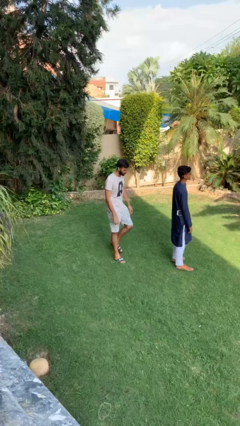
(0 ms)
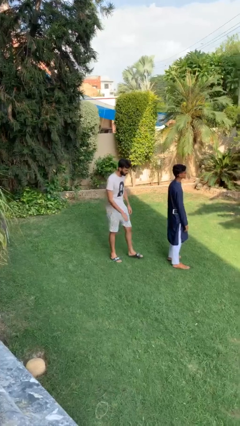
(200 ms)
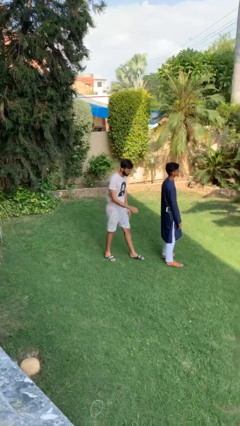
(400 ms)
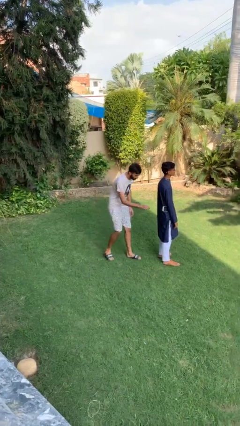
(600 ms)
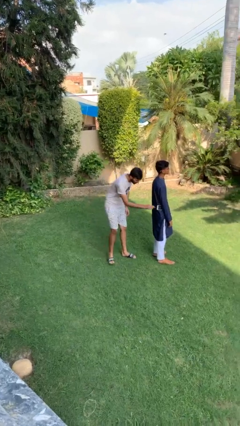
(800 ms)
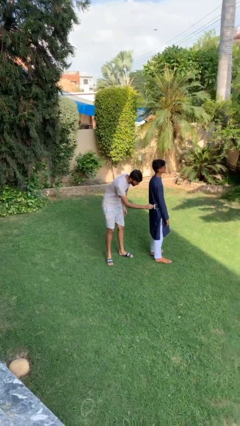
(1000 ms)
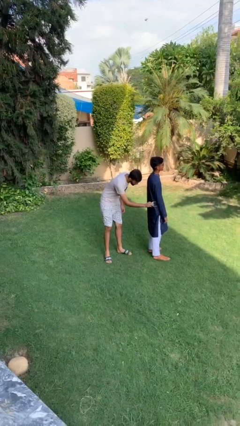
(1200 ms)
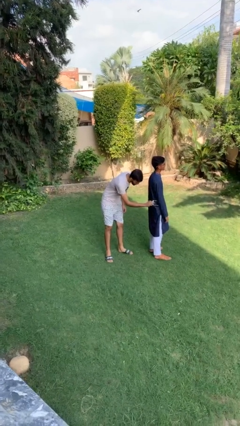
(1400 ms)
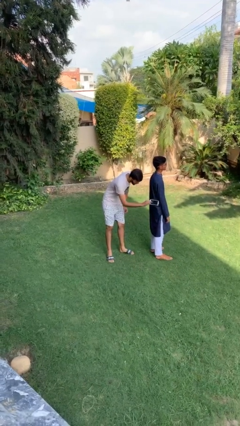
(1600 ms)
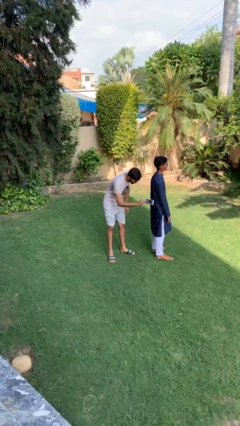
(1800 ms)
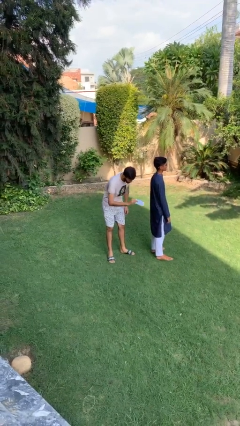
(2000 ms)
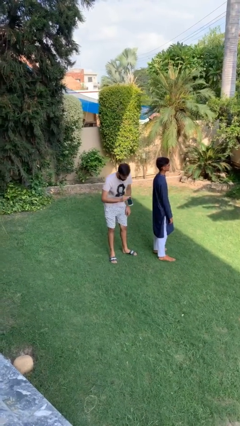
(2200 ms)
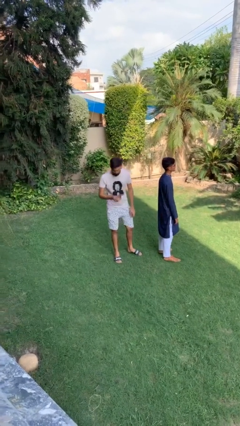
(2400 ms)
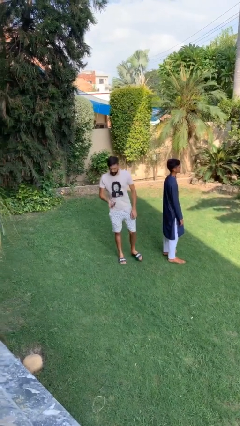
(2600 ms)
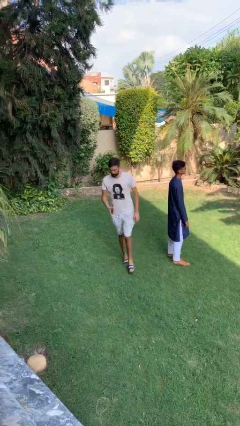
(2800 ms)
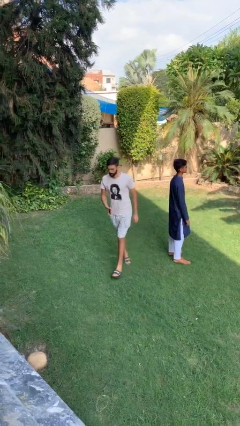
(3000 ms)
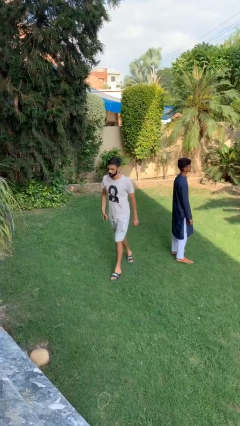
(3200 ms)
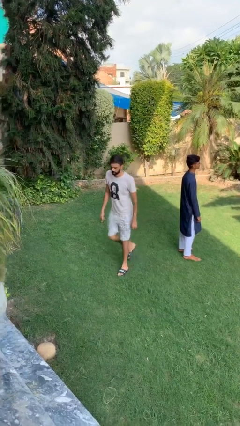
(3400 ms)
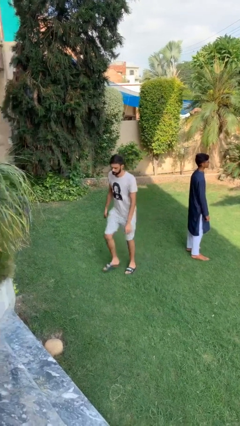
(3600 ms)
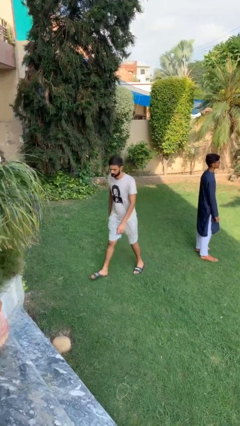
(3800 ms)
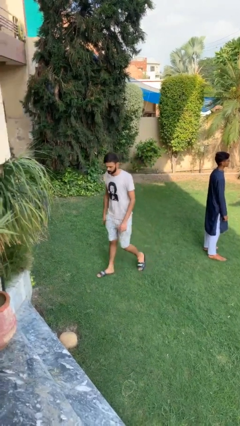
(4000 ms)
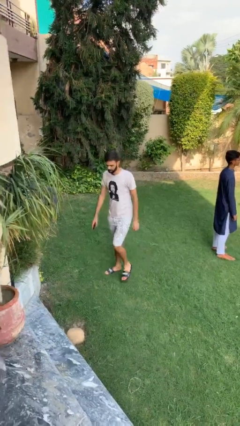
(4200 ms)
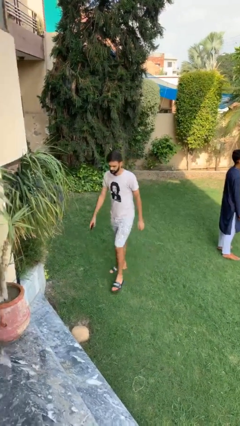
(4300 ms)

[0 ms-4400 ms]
person steals object from person

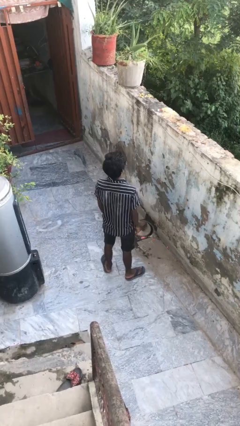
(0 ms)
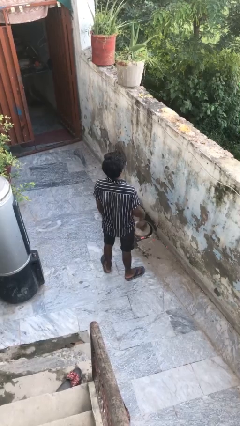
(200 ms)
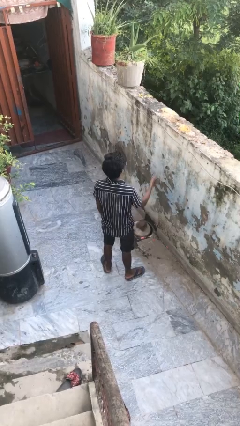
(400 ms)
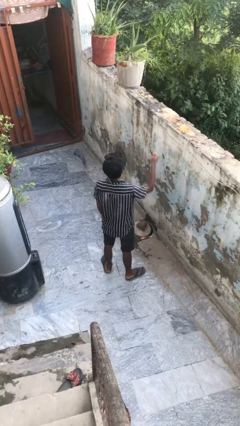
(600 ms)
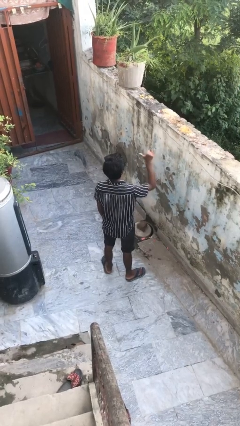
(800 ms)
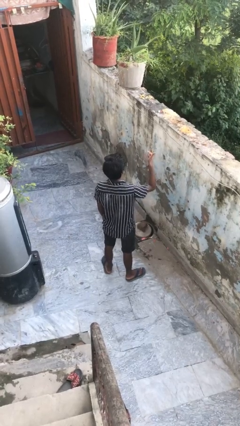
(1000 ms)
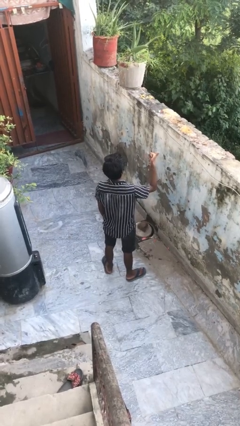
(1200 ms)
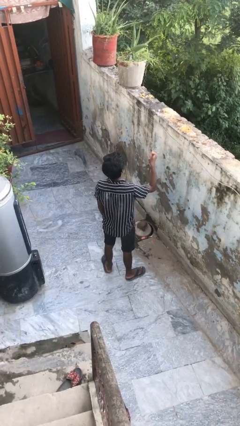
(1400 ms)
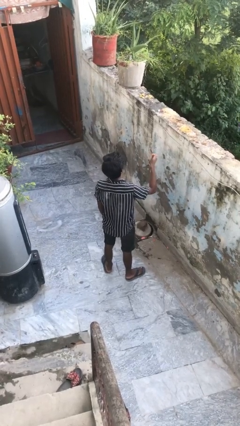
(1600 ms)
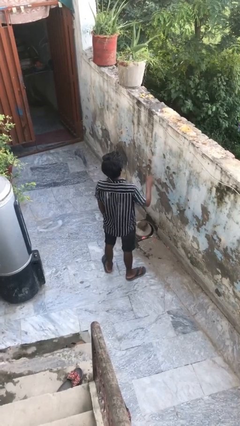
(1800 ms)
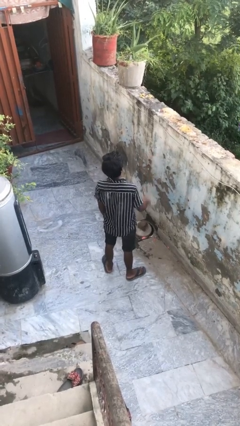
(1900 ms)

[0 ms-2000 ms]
person gestures hang loose

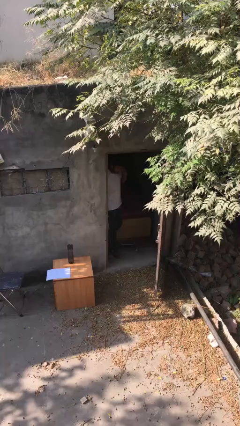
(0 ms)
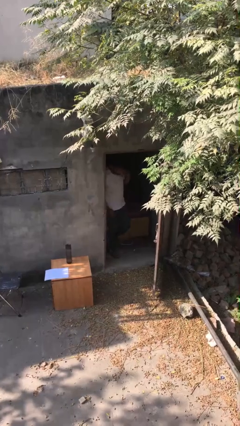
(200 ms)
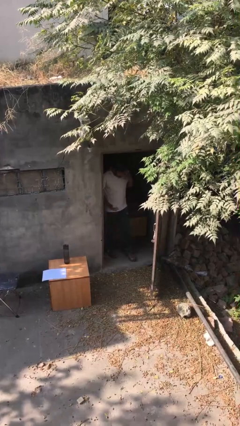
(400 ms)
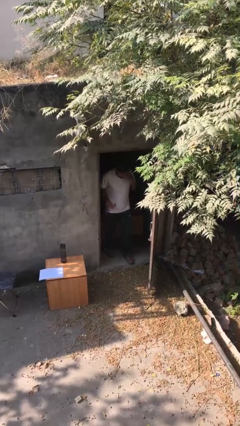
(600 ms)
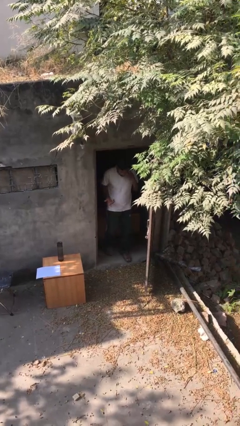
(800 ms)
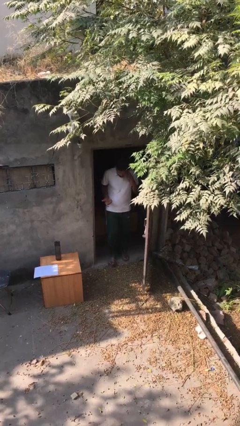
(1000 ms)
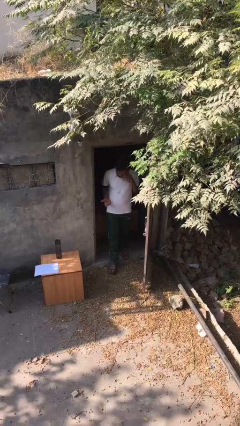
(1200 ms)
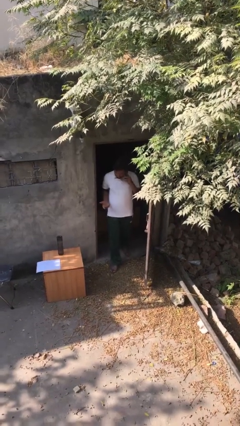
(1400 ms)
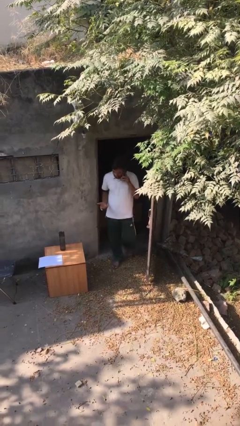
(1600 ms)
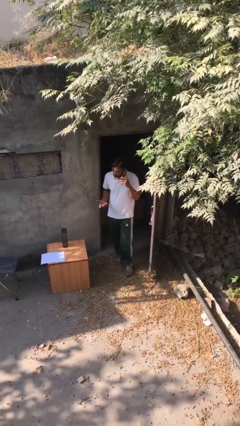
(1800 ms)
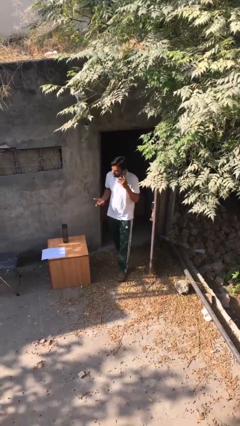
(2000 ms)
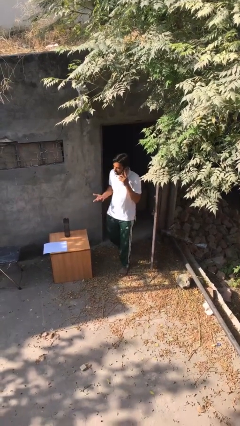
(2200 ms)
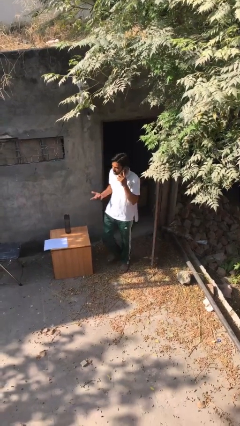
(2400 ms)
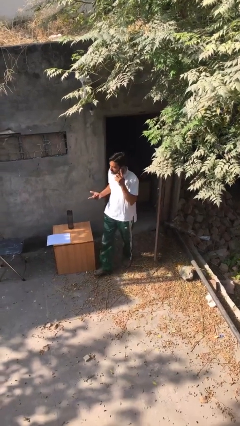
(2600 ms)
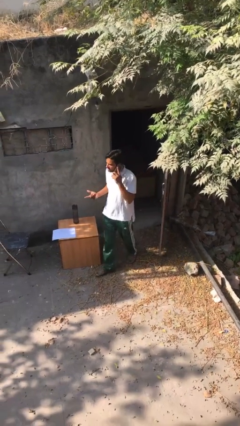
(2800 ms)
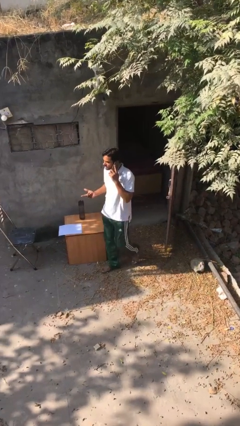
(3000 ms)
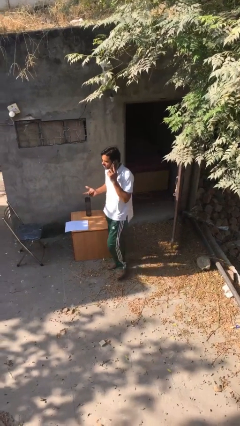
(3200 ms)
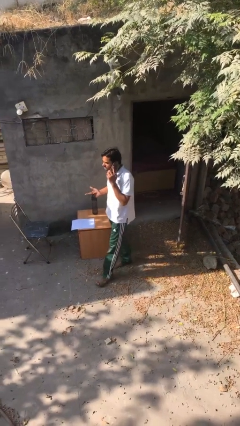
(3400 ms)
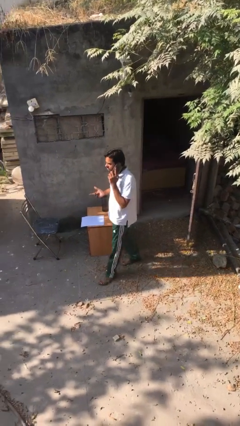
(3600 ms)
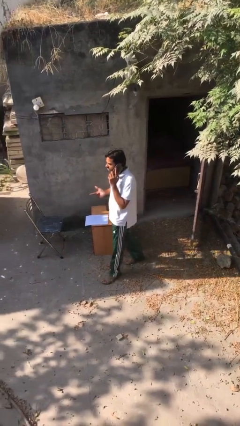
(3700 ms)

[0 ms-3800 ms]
person enters scene through structure

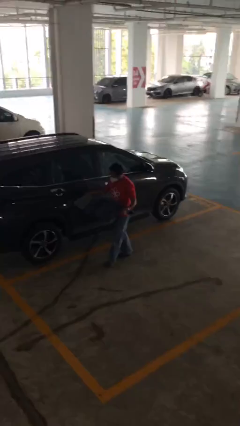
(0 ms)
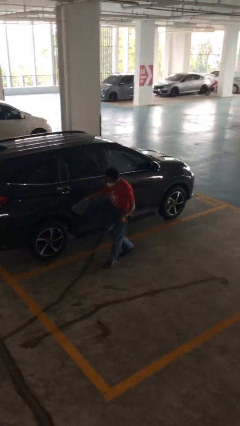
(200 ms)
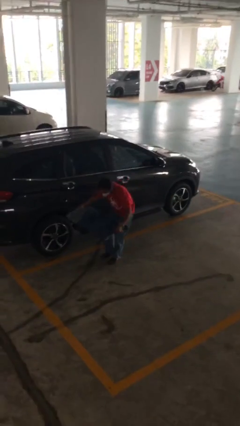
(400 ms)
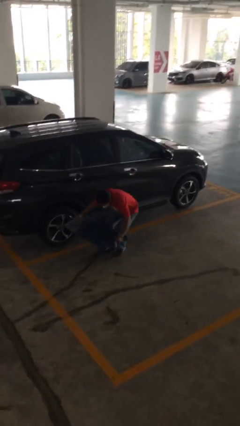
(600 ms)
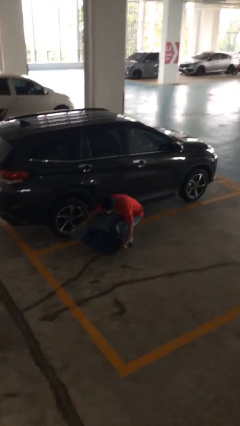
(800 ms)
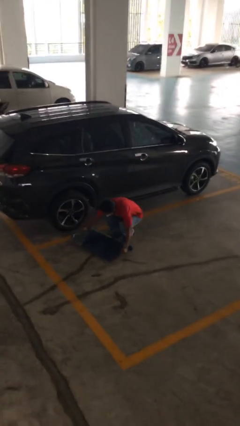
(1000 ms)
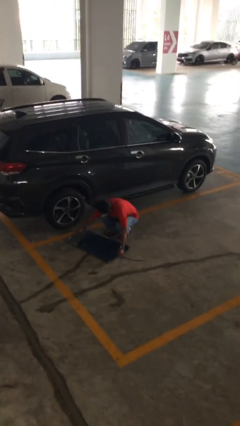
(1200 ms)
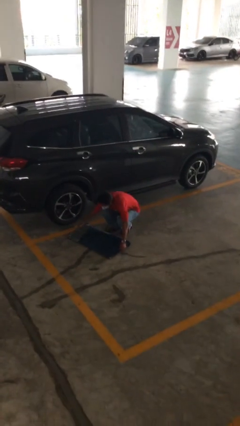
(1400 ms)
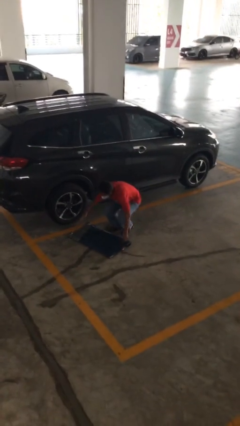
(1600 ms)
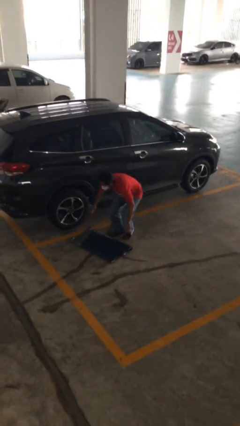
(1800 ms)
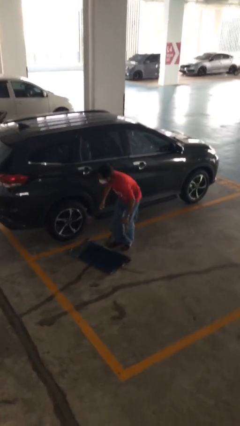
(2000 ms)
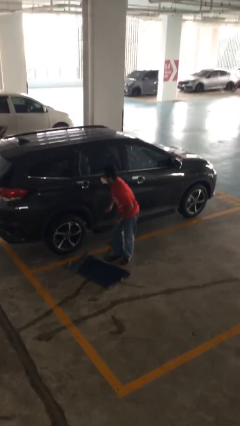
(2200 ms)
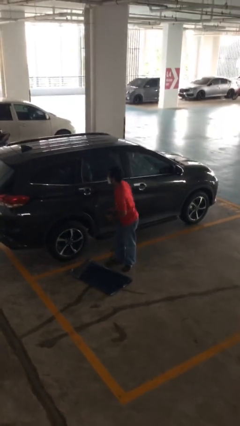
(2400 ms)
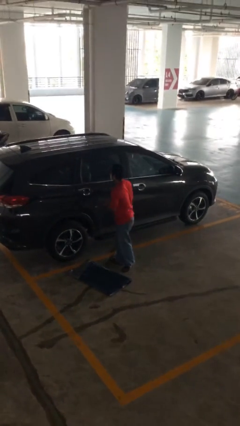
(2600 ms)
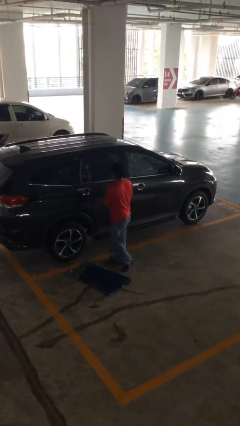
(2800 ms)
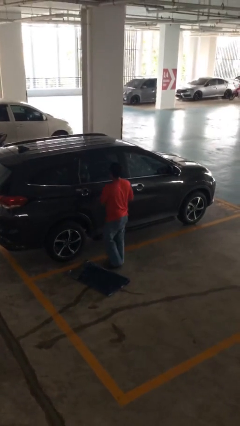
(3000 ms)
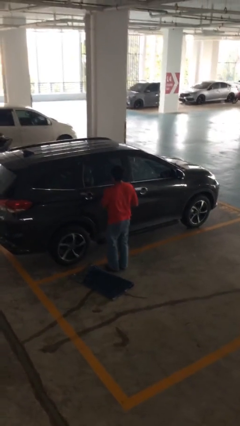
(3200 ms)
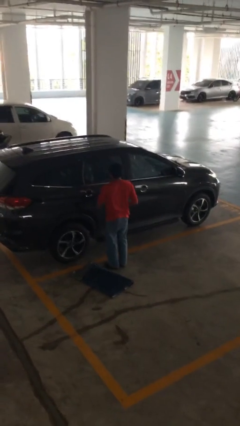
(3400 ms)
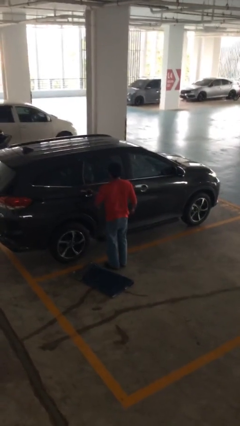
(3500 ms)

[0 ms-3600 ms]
person puts down object on floor

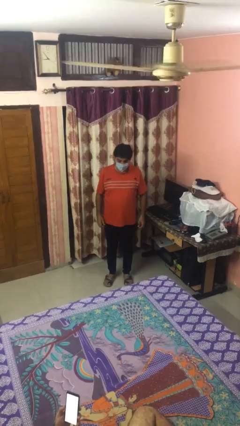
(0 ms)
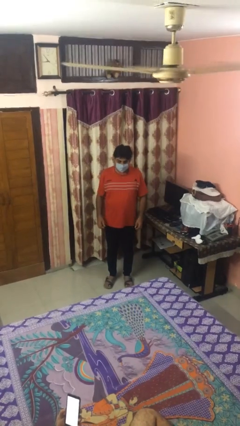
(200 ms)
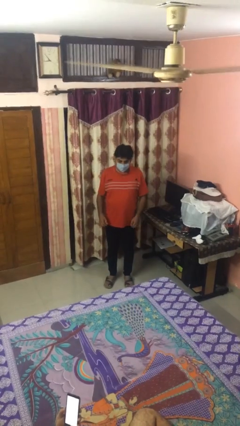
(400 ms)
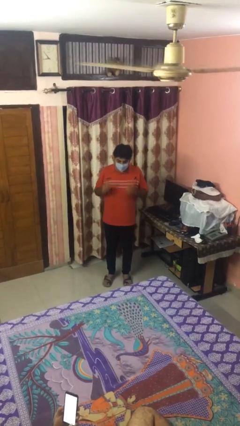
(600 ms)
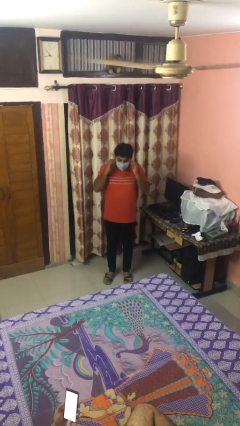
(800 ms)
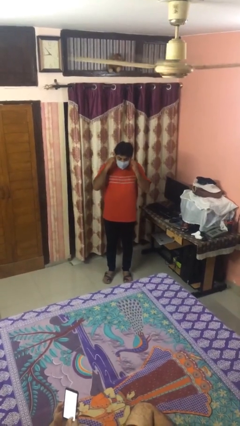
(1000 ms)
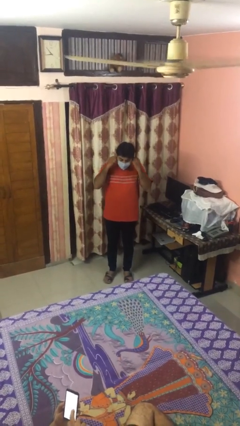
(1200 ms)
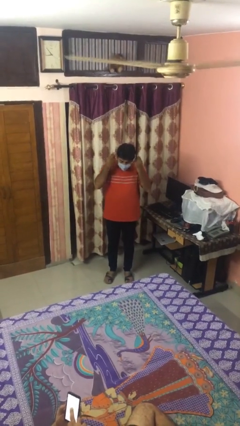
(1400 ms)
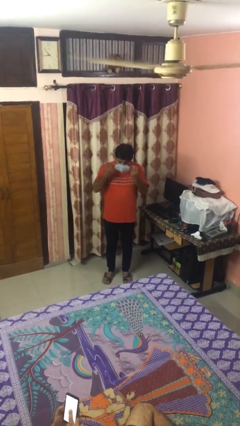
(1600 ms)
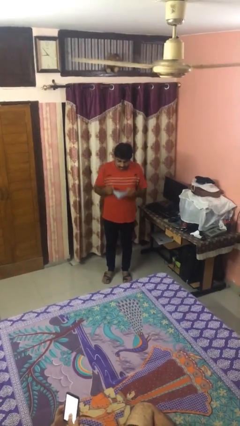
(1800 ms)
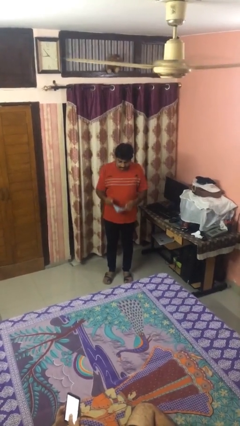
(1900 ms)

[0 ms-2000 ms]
person takes off facemask

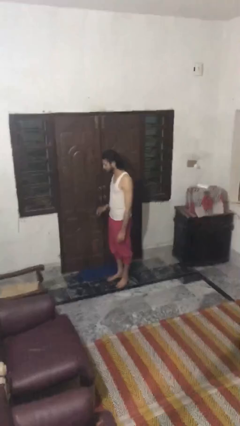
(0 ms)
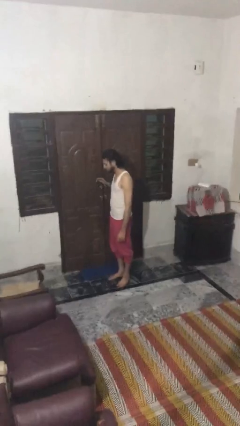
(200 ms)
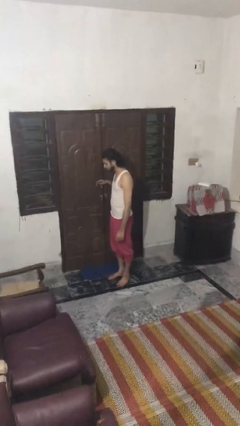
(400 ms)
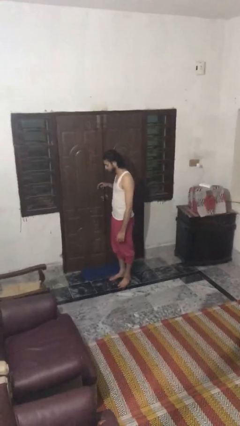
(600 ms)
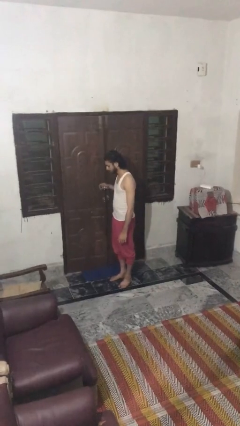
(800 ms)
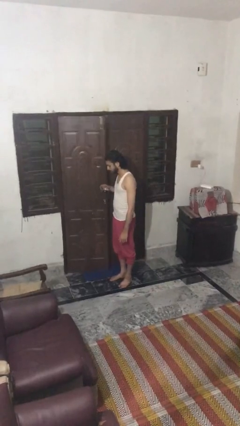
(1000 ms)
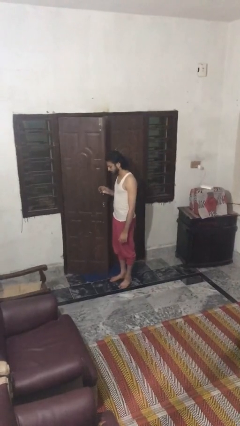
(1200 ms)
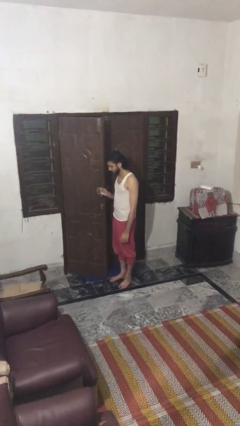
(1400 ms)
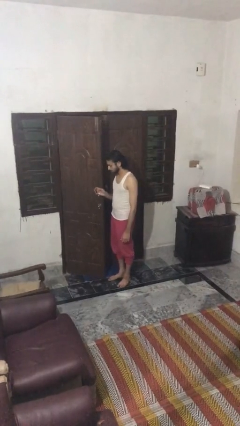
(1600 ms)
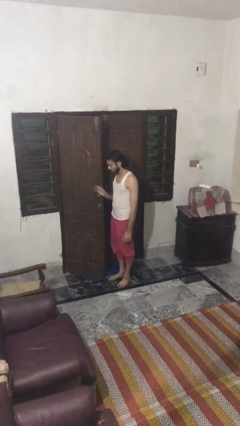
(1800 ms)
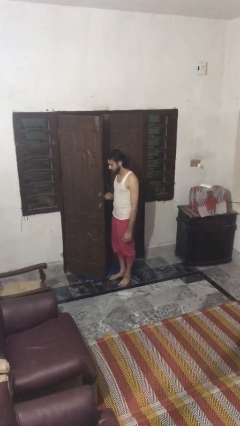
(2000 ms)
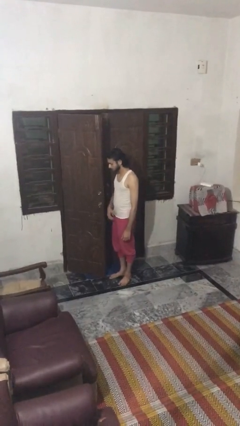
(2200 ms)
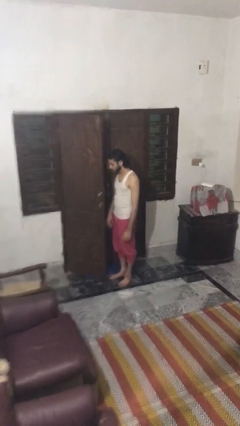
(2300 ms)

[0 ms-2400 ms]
person opens facility door
